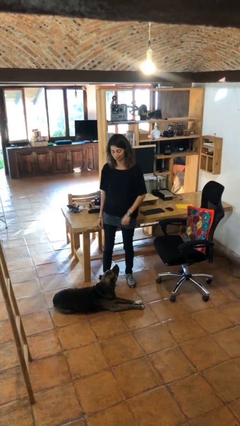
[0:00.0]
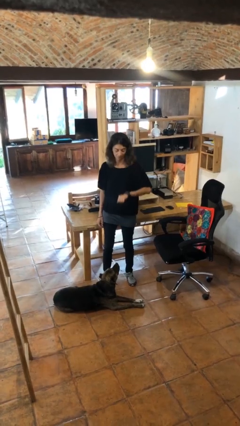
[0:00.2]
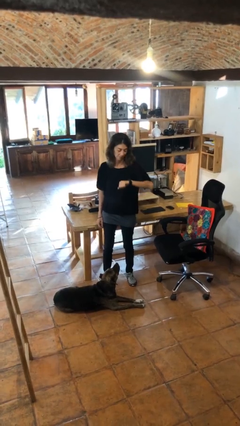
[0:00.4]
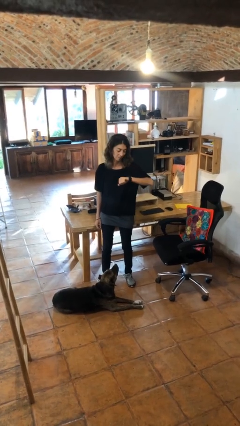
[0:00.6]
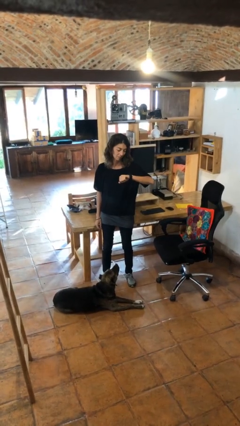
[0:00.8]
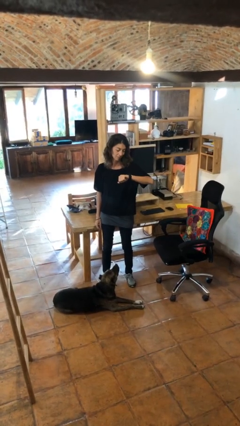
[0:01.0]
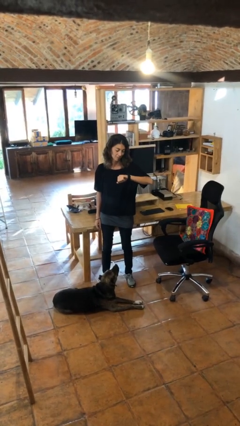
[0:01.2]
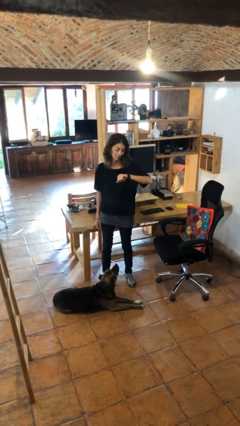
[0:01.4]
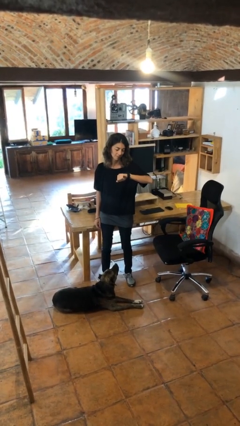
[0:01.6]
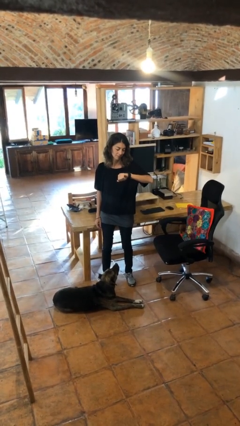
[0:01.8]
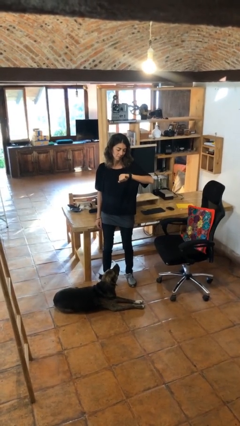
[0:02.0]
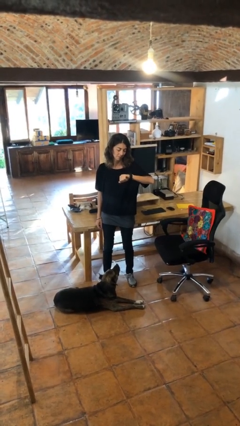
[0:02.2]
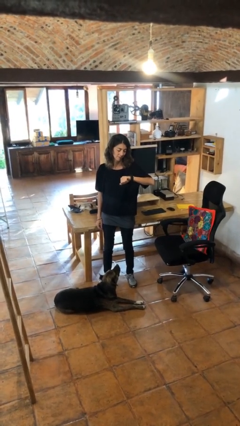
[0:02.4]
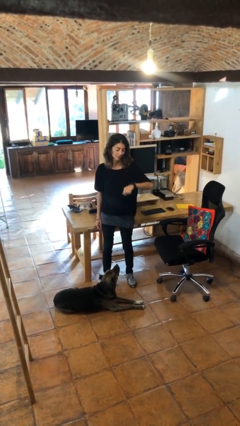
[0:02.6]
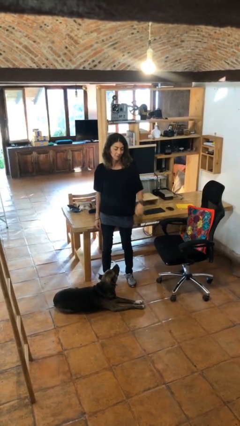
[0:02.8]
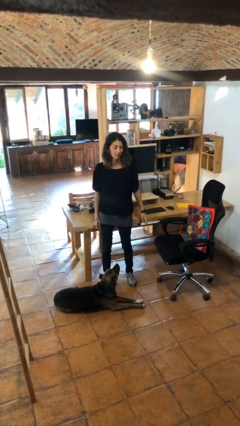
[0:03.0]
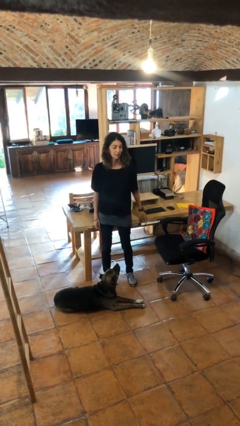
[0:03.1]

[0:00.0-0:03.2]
person looks at wristwatch

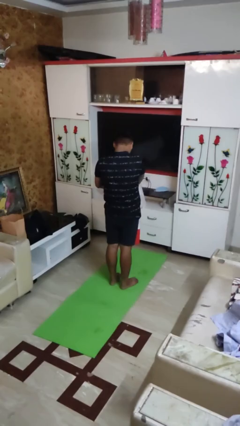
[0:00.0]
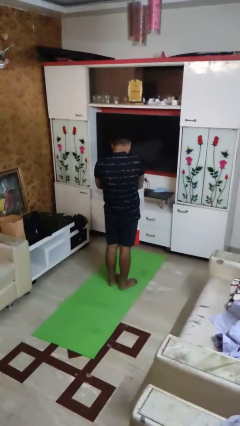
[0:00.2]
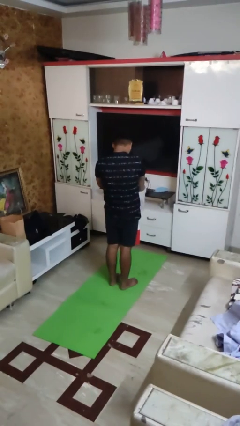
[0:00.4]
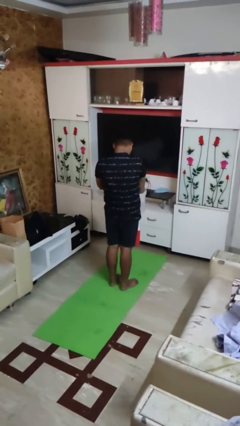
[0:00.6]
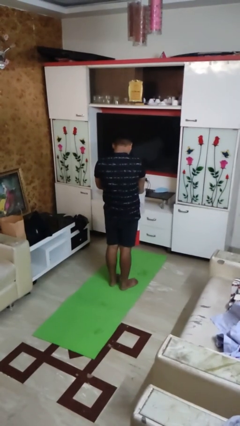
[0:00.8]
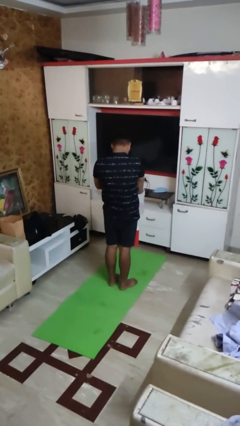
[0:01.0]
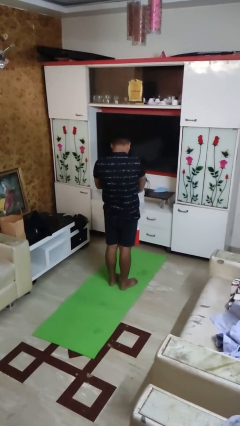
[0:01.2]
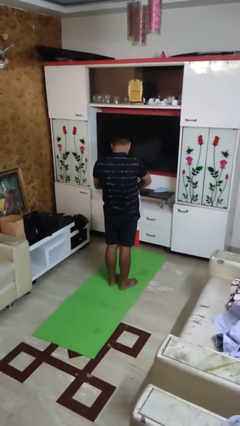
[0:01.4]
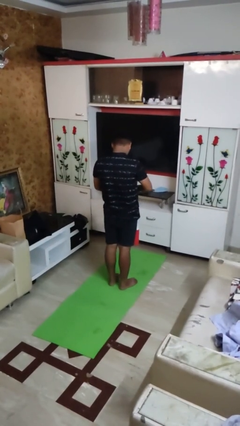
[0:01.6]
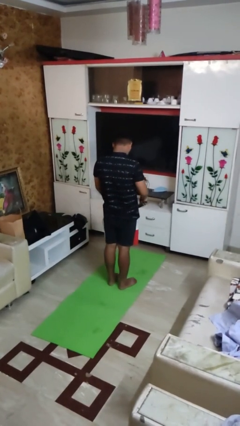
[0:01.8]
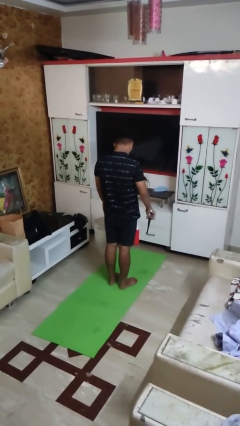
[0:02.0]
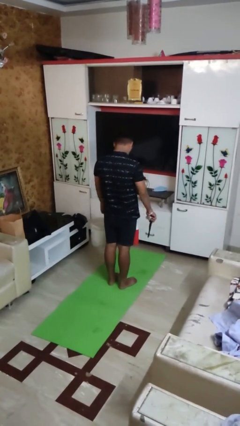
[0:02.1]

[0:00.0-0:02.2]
person takes object from basket

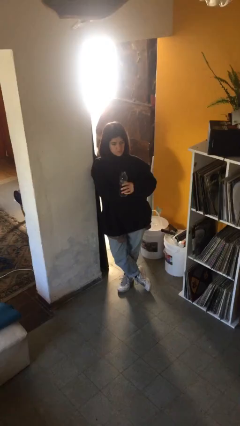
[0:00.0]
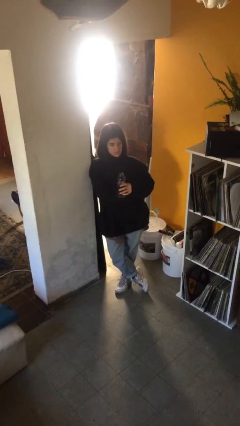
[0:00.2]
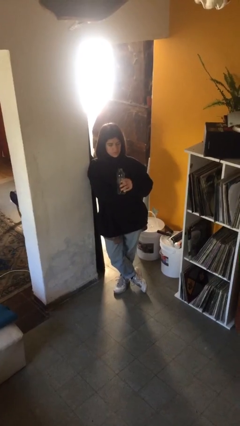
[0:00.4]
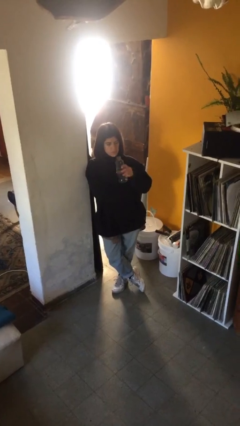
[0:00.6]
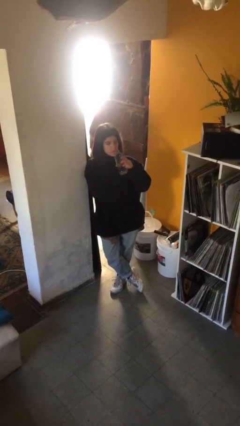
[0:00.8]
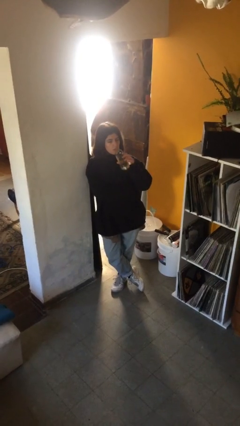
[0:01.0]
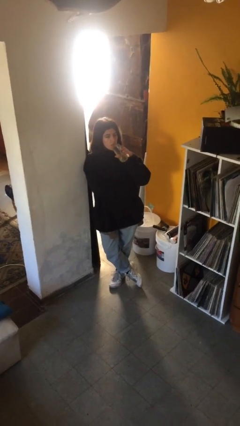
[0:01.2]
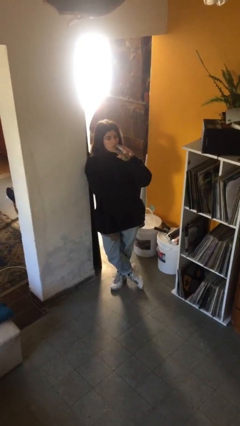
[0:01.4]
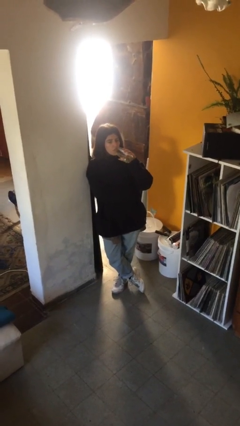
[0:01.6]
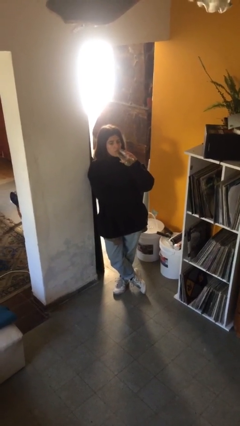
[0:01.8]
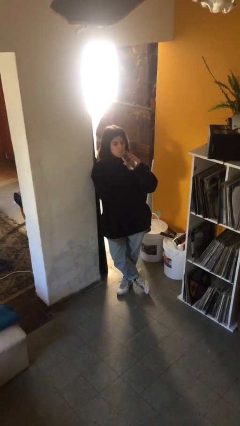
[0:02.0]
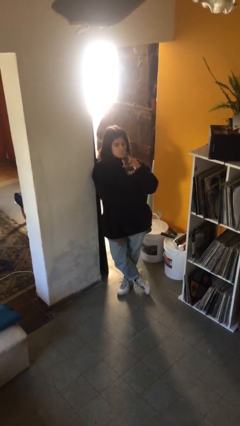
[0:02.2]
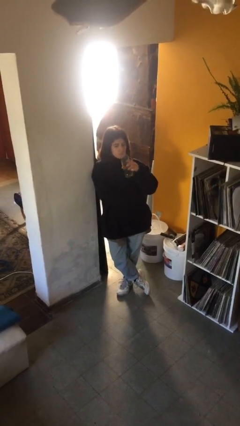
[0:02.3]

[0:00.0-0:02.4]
person drinks from bottle

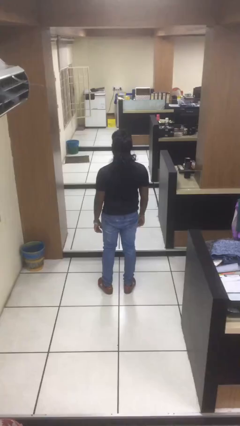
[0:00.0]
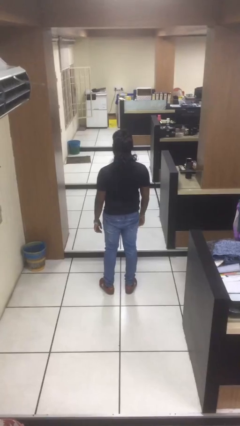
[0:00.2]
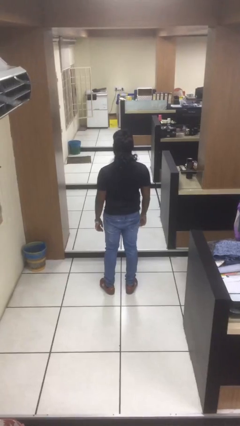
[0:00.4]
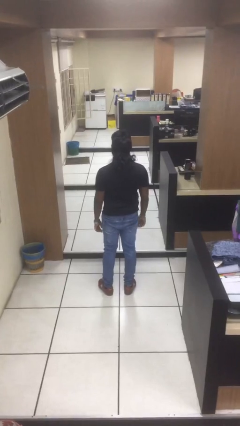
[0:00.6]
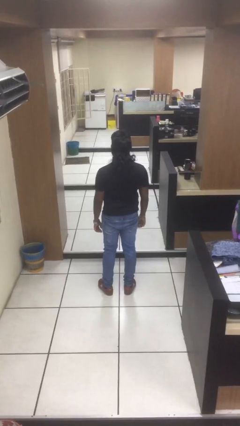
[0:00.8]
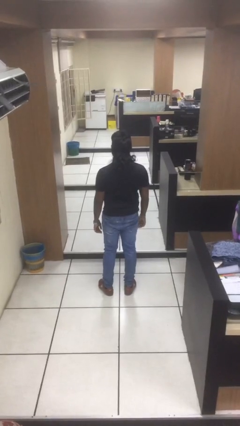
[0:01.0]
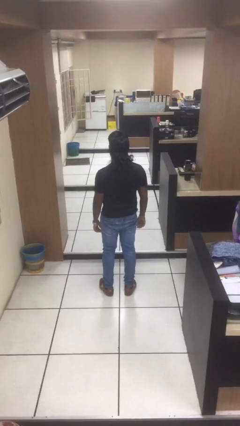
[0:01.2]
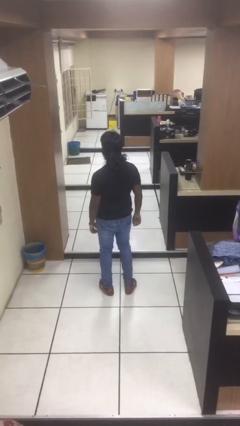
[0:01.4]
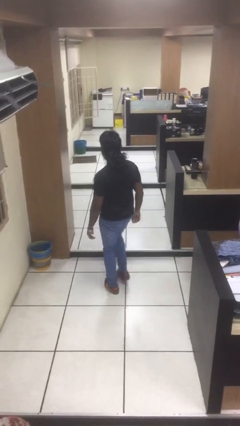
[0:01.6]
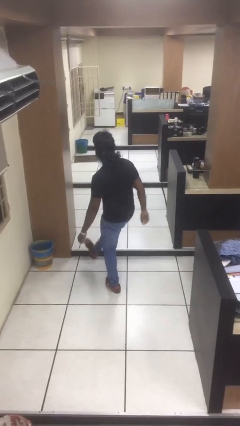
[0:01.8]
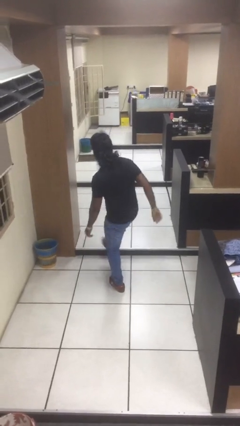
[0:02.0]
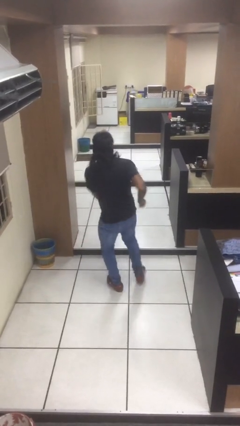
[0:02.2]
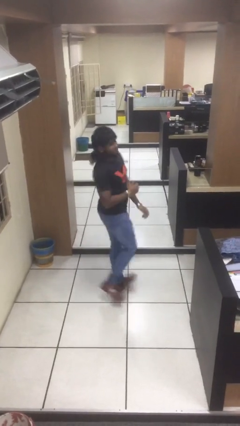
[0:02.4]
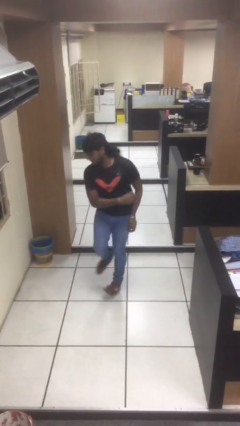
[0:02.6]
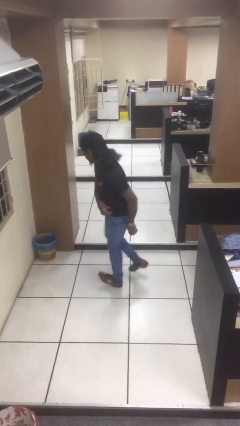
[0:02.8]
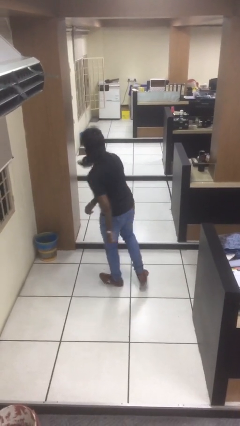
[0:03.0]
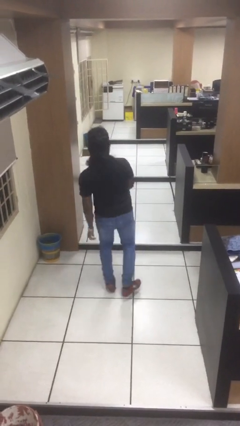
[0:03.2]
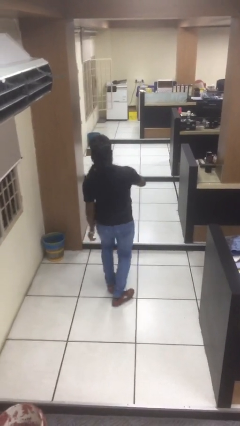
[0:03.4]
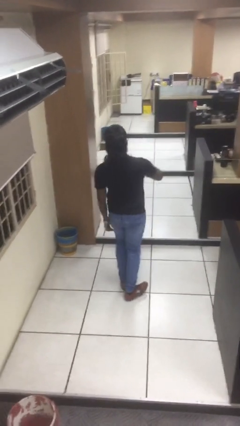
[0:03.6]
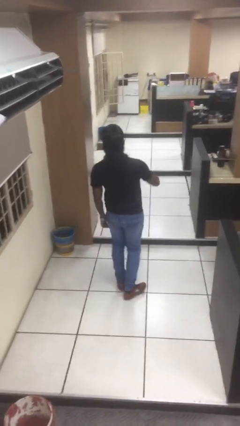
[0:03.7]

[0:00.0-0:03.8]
person twirls

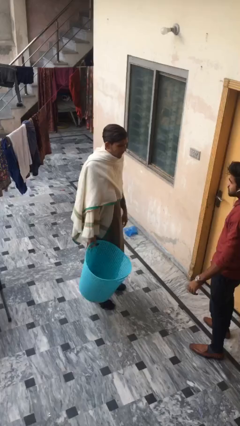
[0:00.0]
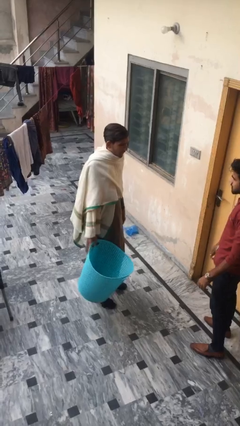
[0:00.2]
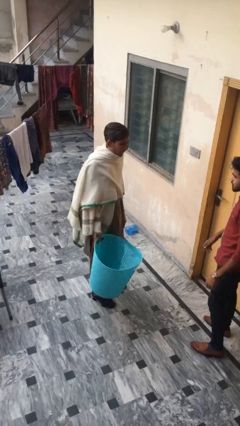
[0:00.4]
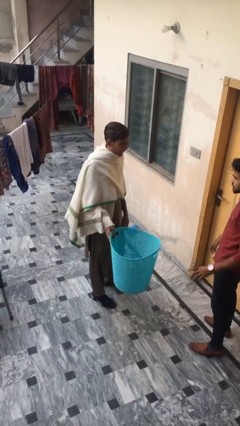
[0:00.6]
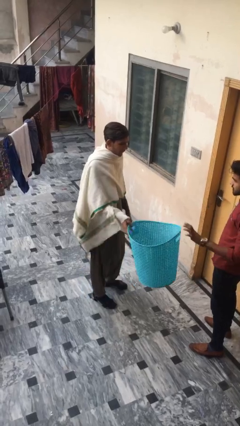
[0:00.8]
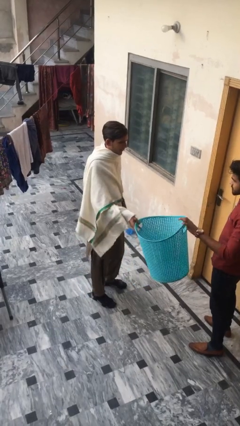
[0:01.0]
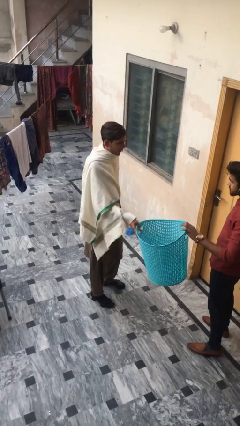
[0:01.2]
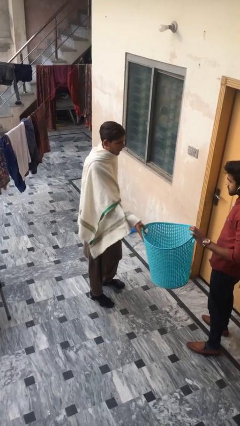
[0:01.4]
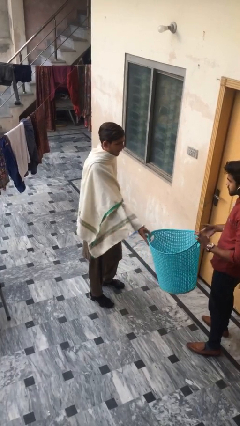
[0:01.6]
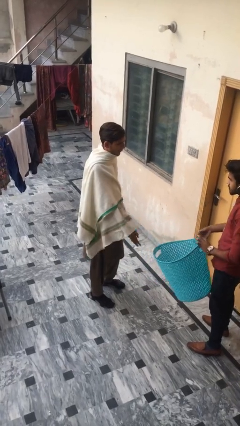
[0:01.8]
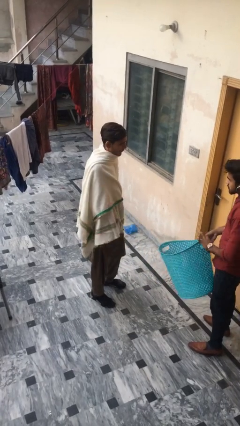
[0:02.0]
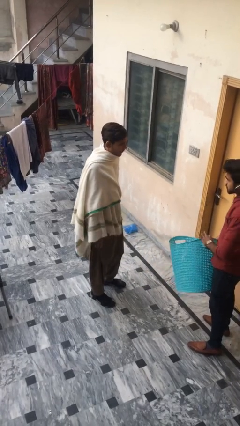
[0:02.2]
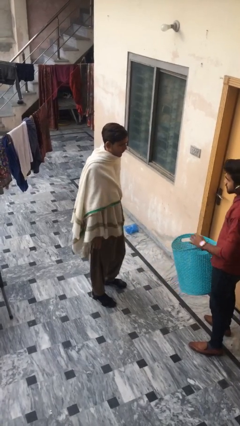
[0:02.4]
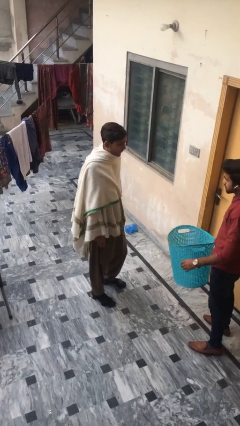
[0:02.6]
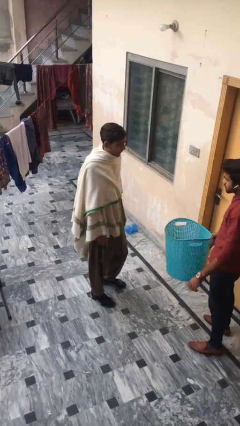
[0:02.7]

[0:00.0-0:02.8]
person transfers object to person

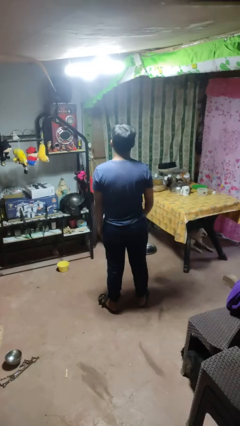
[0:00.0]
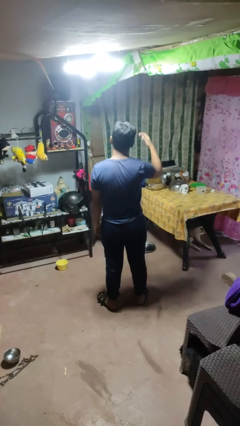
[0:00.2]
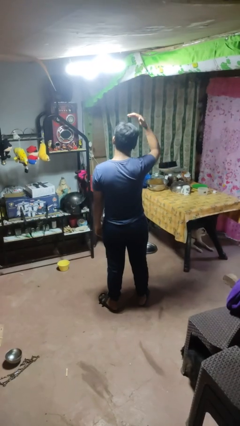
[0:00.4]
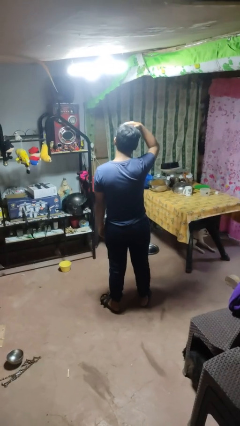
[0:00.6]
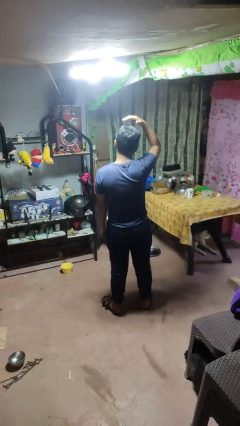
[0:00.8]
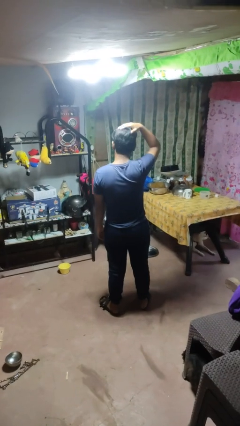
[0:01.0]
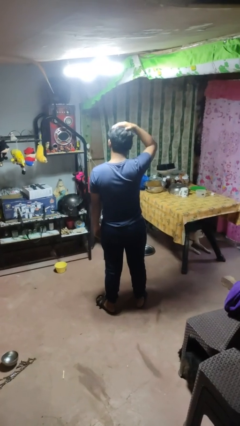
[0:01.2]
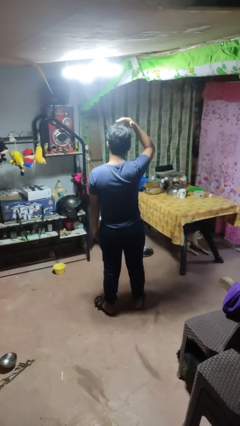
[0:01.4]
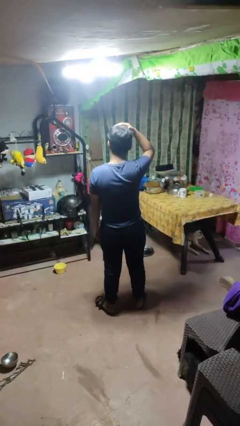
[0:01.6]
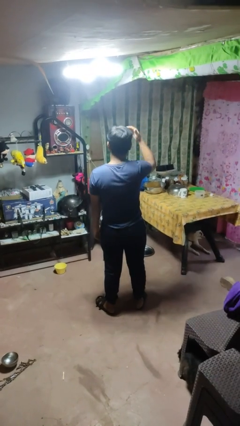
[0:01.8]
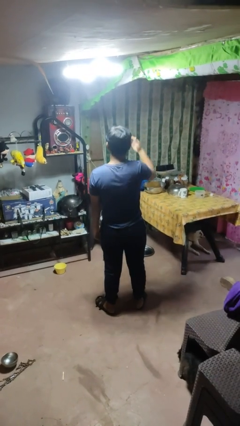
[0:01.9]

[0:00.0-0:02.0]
person pats head

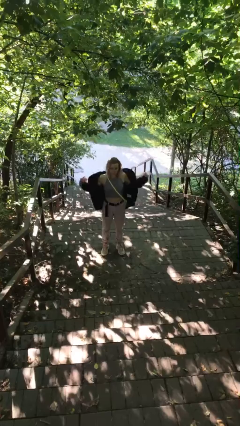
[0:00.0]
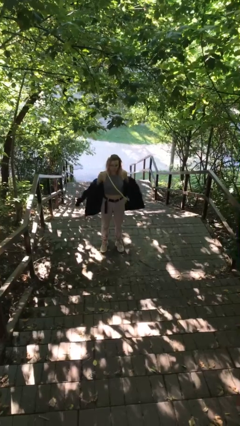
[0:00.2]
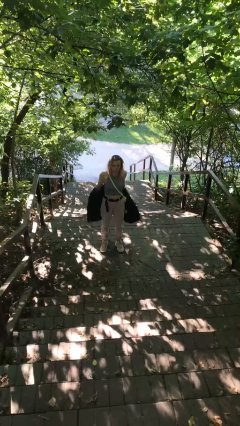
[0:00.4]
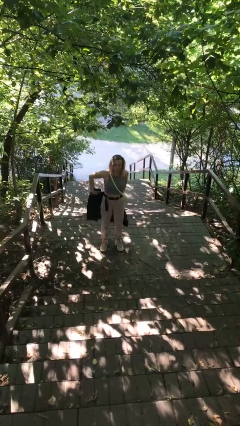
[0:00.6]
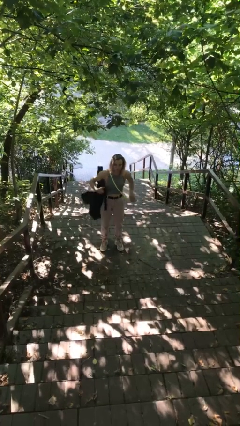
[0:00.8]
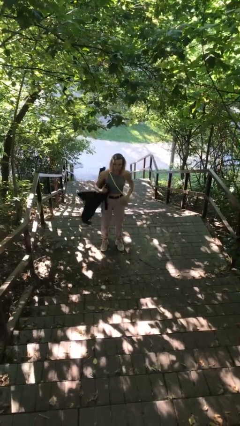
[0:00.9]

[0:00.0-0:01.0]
person takes off jacket
